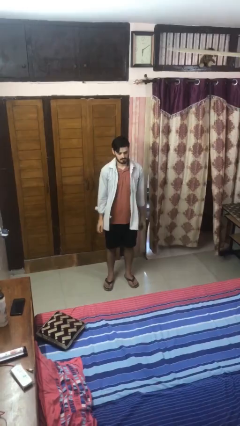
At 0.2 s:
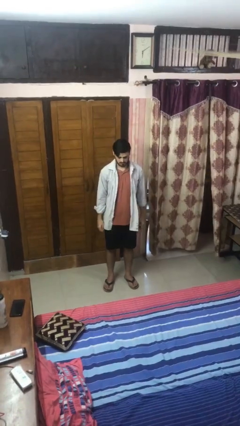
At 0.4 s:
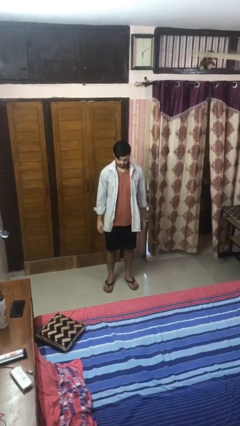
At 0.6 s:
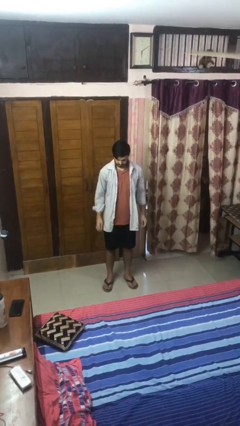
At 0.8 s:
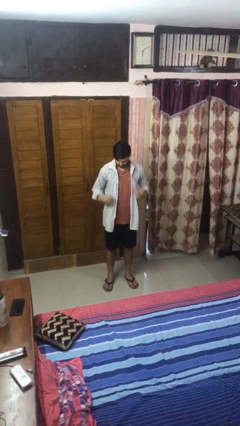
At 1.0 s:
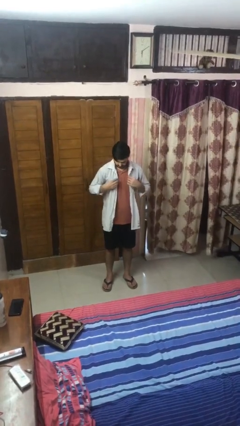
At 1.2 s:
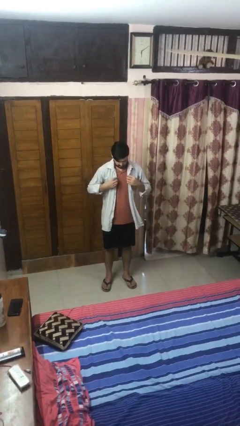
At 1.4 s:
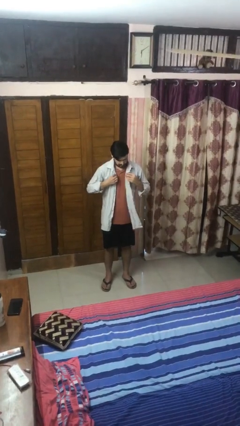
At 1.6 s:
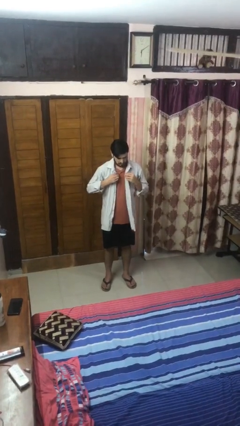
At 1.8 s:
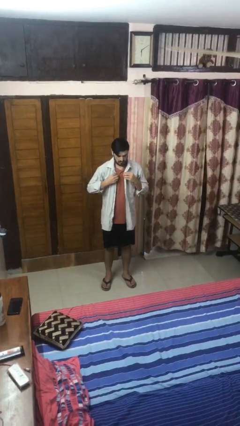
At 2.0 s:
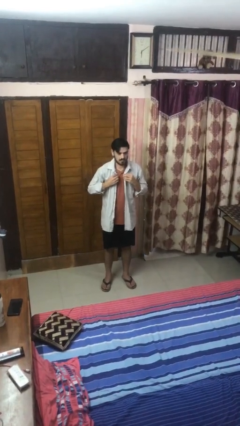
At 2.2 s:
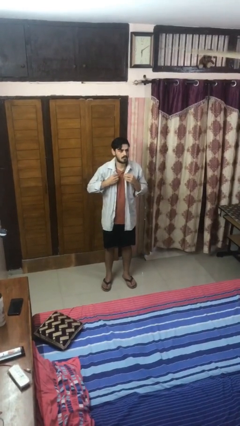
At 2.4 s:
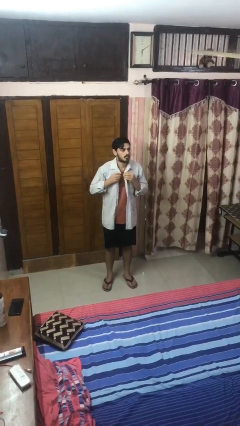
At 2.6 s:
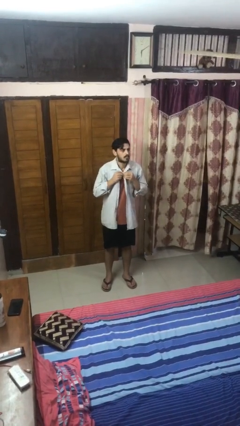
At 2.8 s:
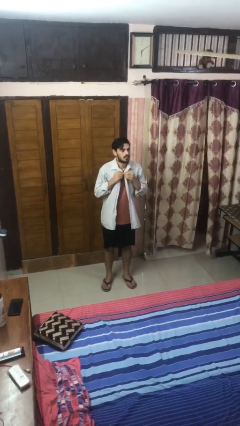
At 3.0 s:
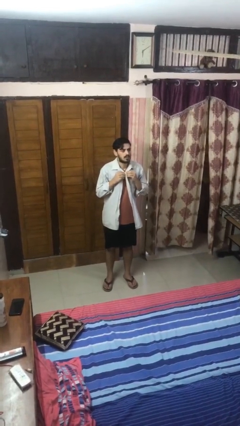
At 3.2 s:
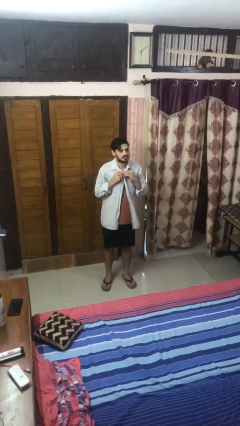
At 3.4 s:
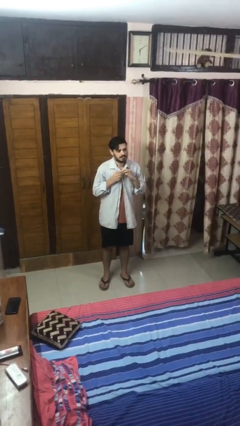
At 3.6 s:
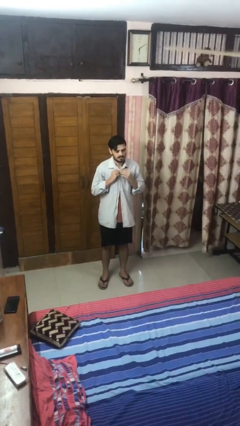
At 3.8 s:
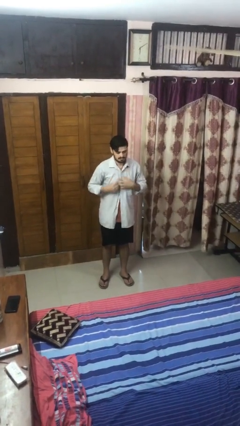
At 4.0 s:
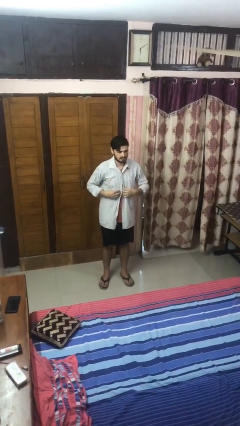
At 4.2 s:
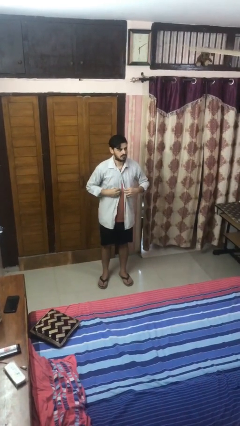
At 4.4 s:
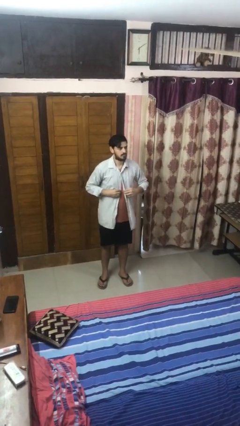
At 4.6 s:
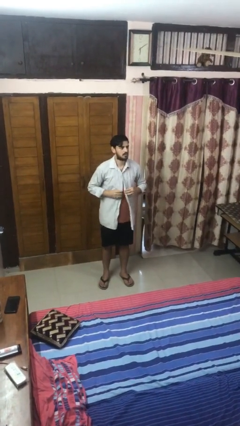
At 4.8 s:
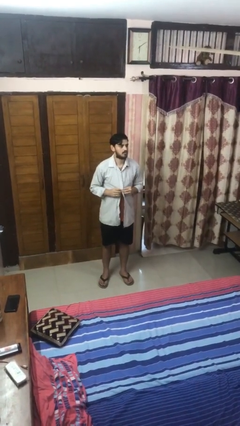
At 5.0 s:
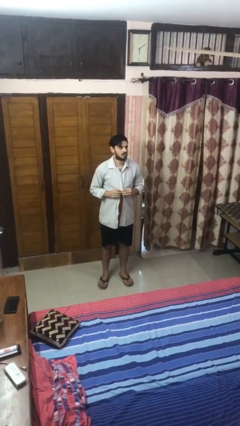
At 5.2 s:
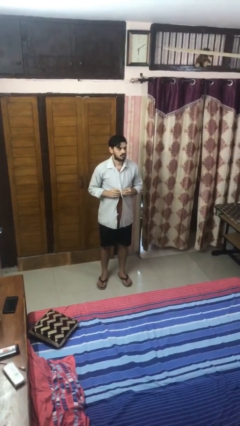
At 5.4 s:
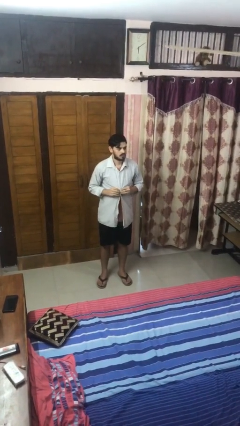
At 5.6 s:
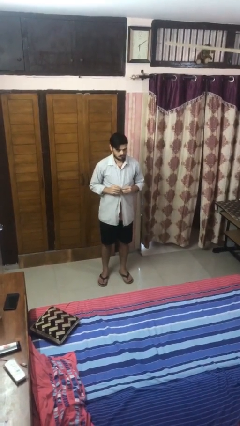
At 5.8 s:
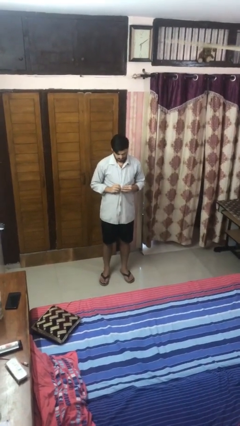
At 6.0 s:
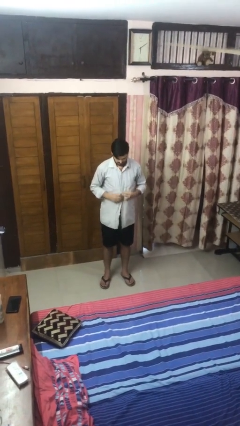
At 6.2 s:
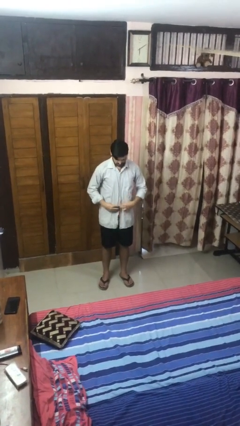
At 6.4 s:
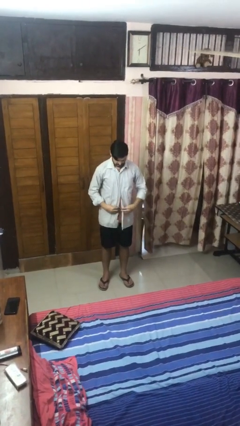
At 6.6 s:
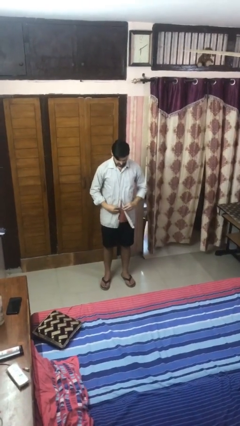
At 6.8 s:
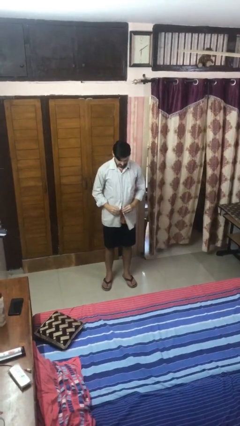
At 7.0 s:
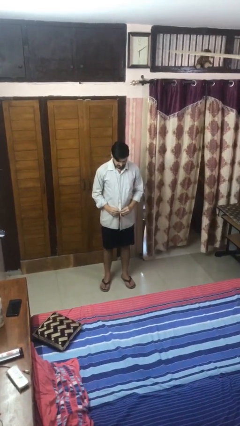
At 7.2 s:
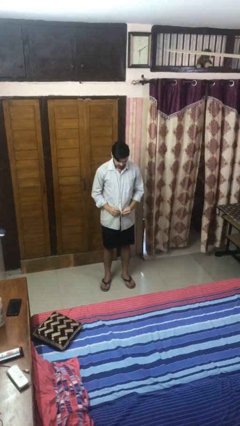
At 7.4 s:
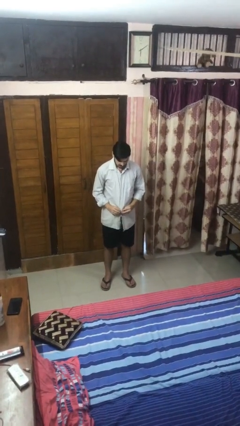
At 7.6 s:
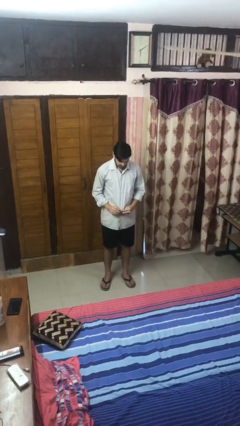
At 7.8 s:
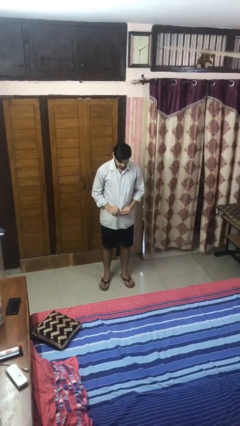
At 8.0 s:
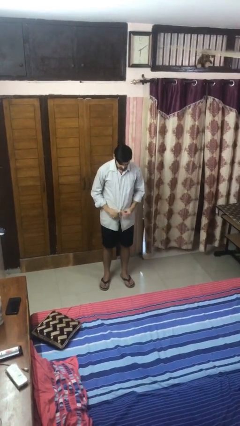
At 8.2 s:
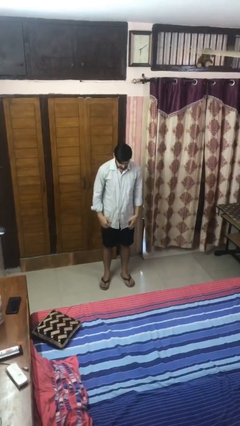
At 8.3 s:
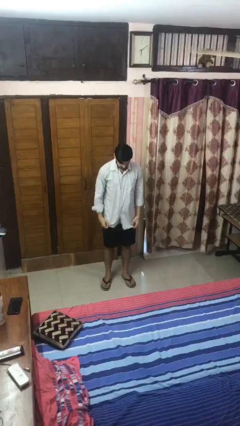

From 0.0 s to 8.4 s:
person buttons shirt

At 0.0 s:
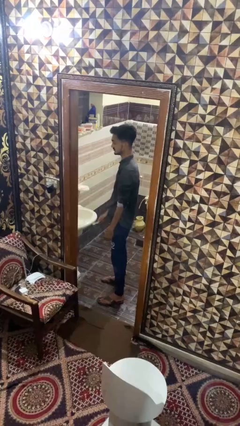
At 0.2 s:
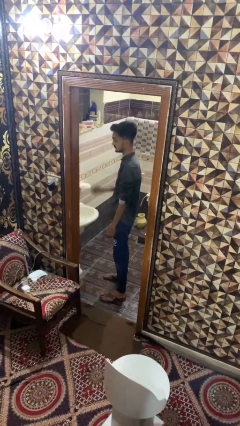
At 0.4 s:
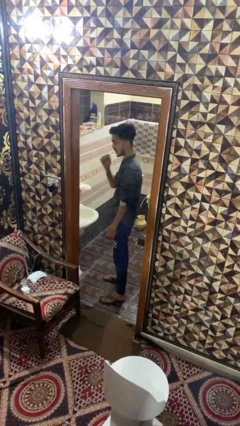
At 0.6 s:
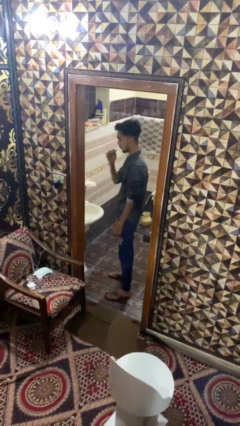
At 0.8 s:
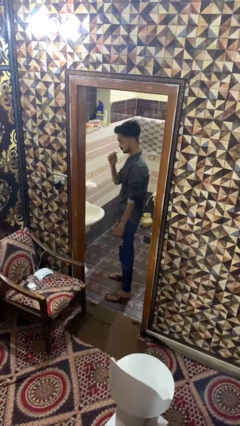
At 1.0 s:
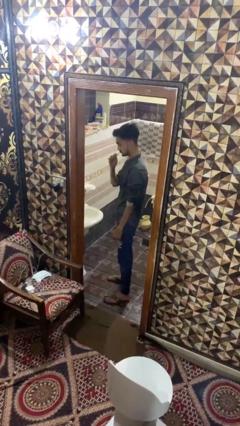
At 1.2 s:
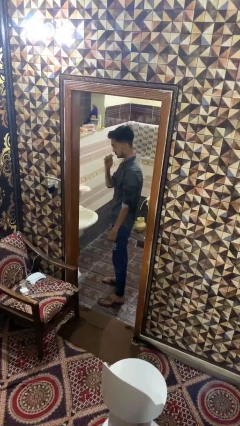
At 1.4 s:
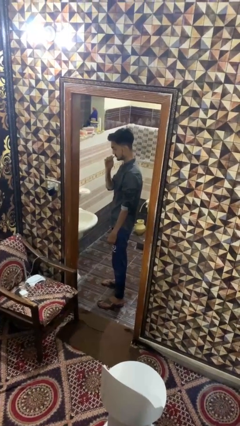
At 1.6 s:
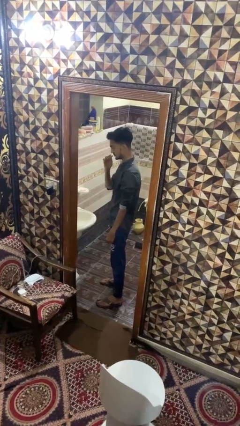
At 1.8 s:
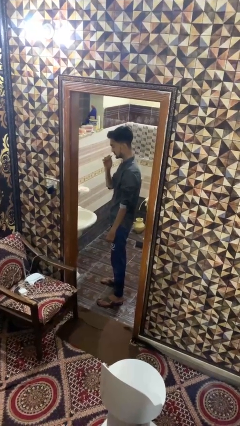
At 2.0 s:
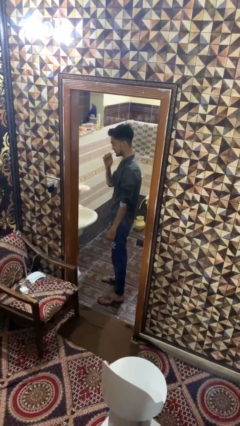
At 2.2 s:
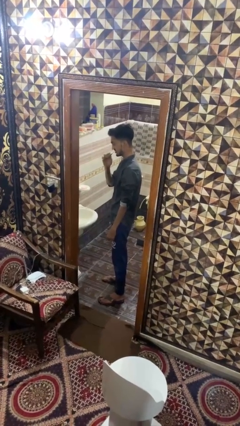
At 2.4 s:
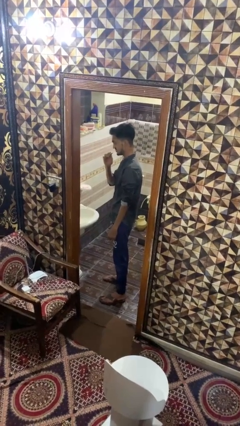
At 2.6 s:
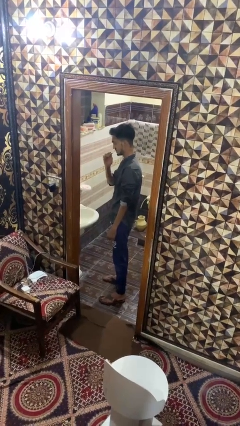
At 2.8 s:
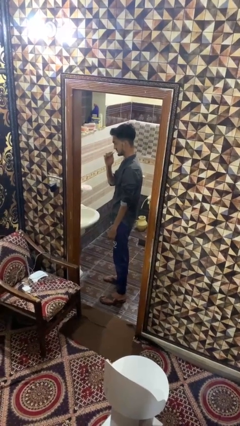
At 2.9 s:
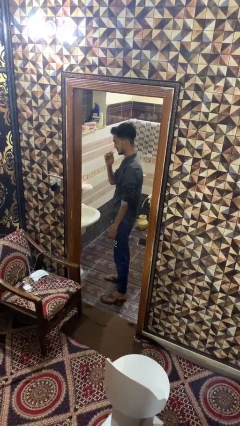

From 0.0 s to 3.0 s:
person brushes teeth

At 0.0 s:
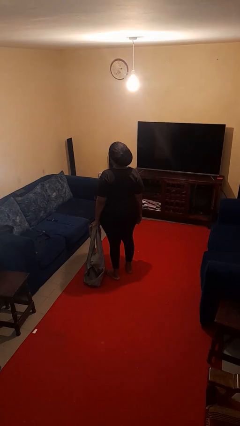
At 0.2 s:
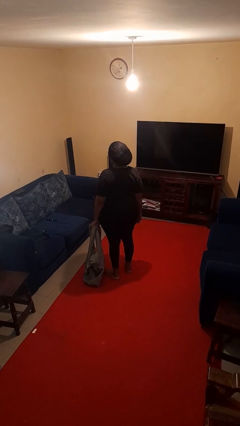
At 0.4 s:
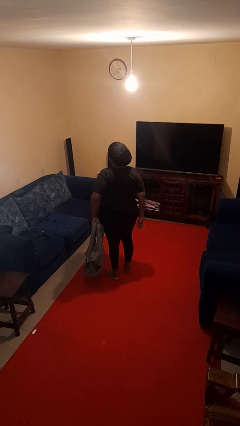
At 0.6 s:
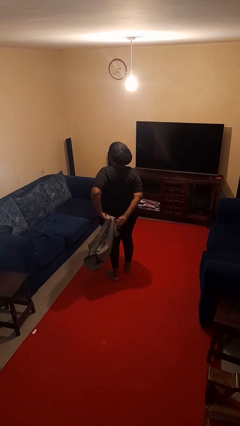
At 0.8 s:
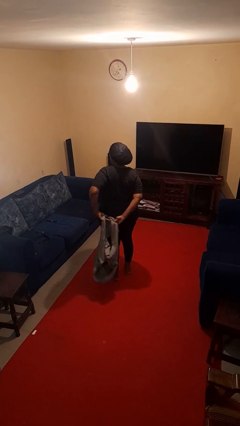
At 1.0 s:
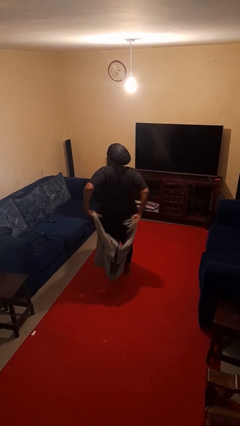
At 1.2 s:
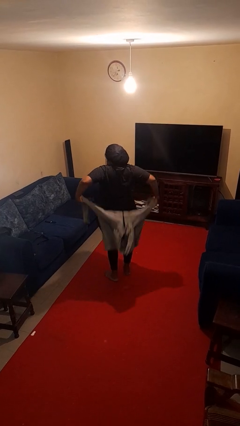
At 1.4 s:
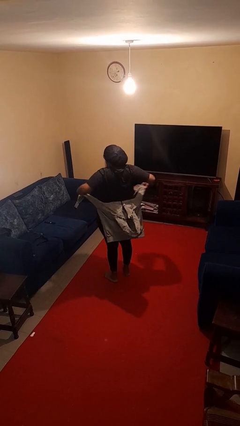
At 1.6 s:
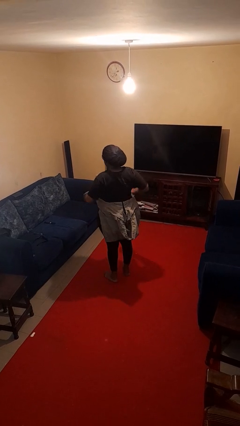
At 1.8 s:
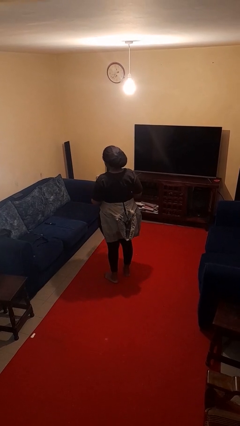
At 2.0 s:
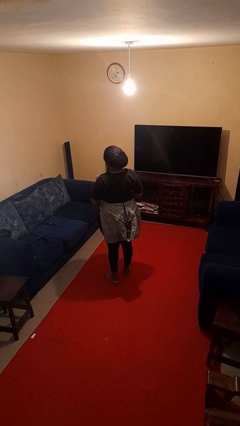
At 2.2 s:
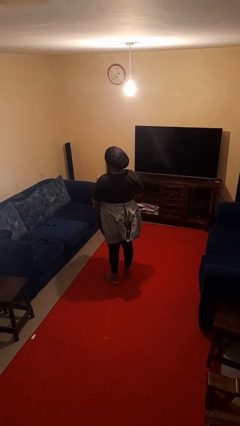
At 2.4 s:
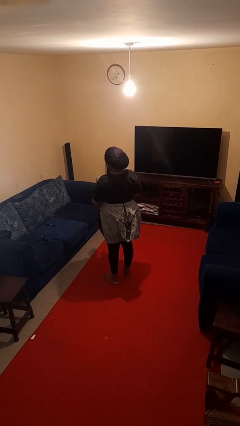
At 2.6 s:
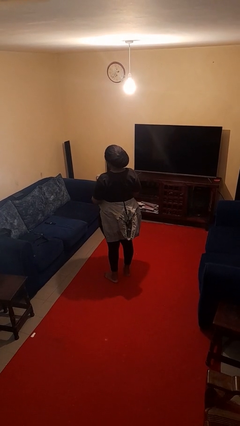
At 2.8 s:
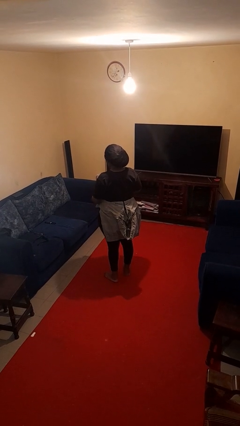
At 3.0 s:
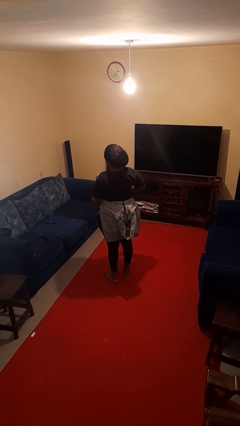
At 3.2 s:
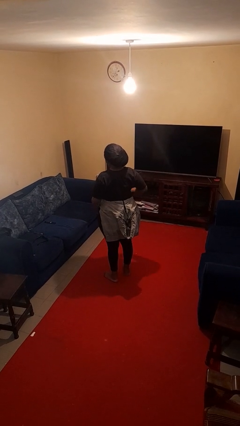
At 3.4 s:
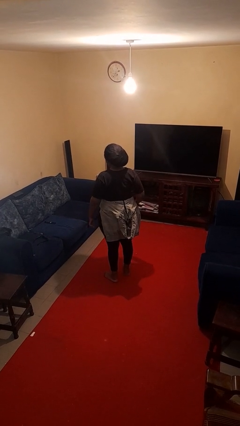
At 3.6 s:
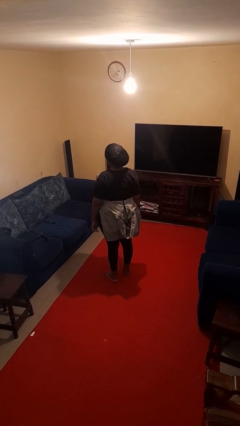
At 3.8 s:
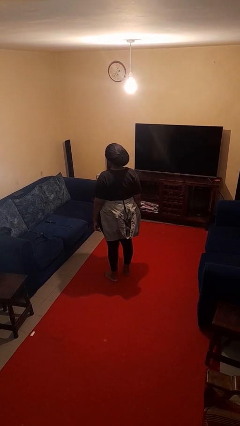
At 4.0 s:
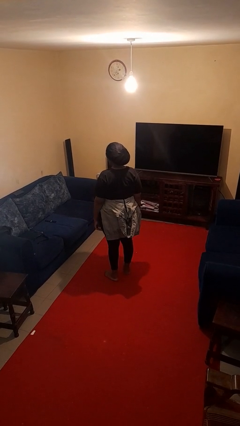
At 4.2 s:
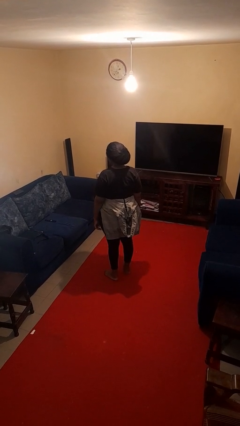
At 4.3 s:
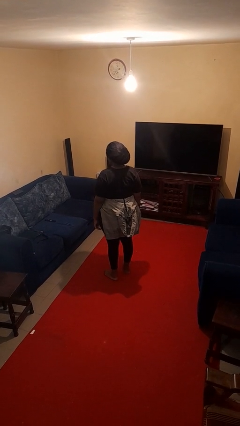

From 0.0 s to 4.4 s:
person ties jacket around waist

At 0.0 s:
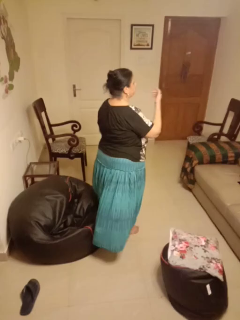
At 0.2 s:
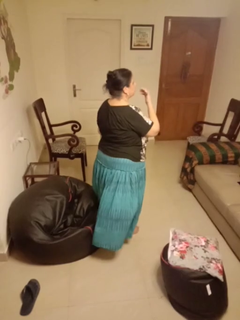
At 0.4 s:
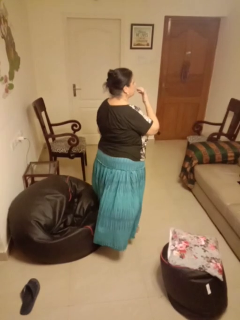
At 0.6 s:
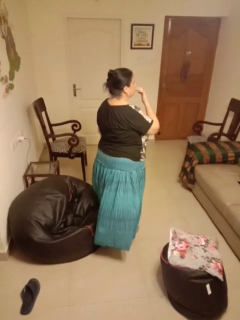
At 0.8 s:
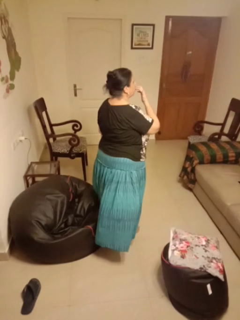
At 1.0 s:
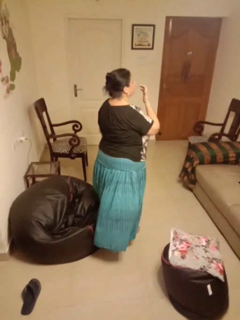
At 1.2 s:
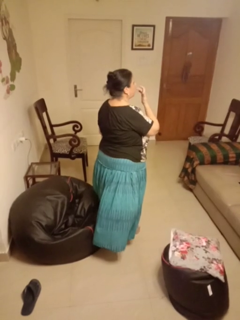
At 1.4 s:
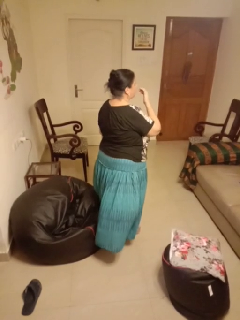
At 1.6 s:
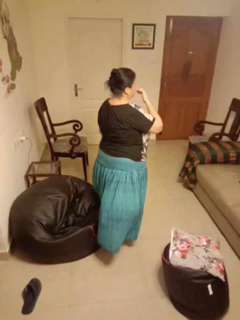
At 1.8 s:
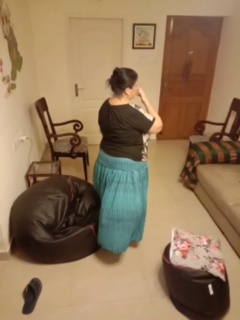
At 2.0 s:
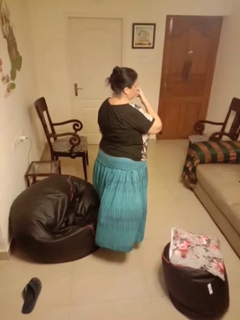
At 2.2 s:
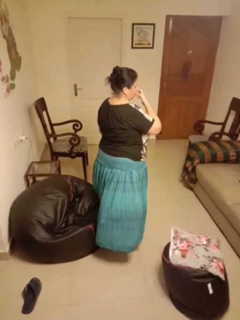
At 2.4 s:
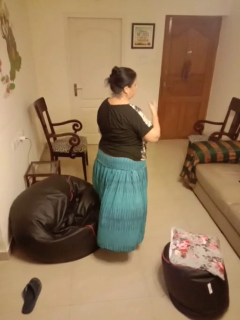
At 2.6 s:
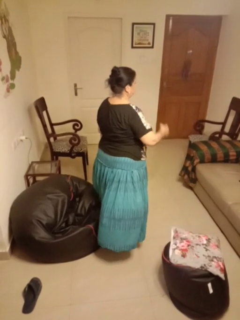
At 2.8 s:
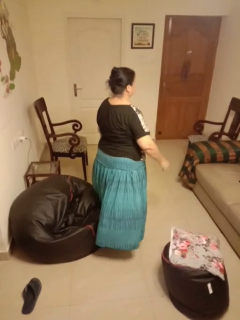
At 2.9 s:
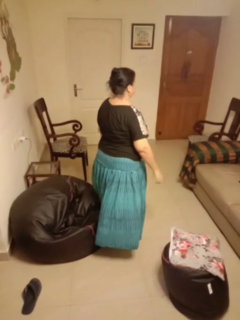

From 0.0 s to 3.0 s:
person licks fingers
